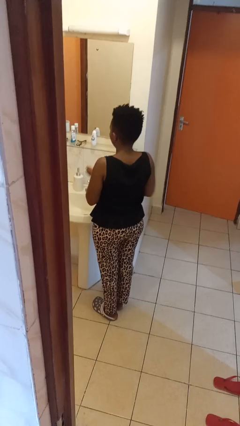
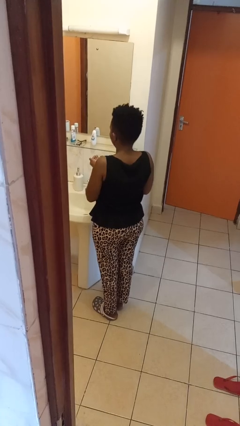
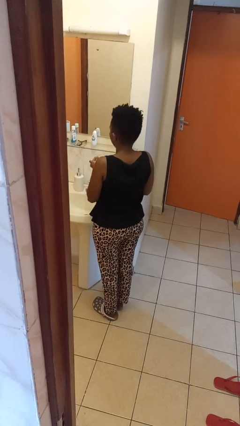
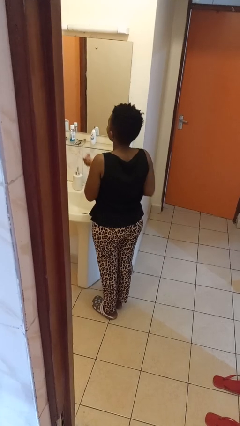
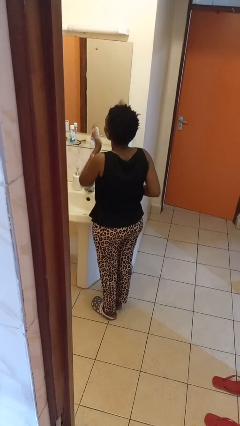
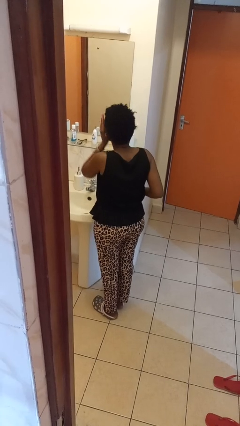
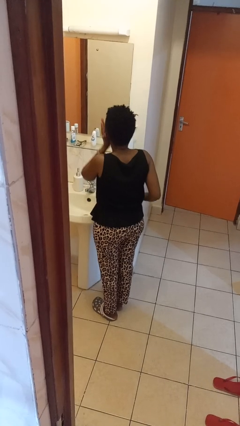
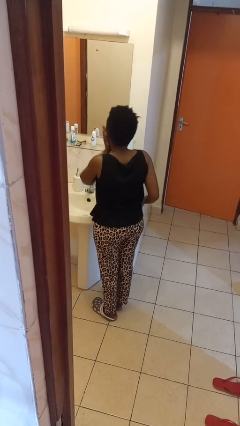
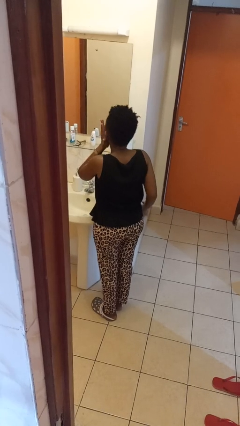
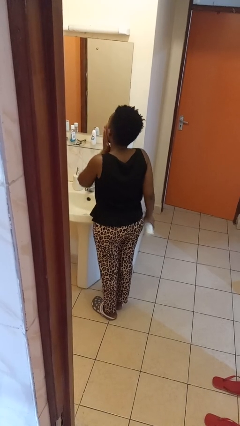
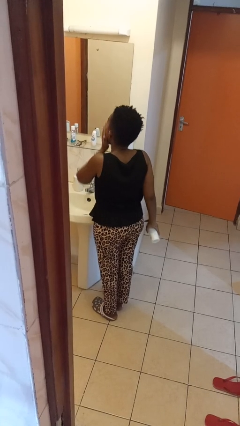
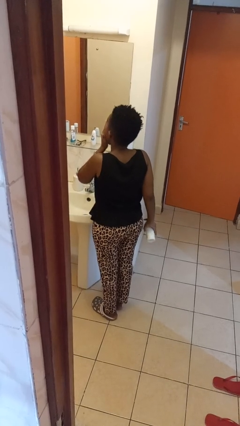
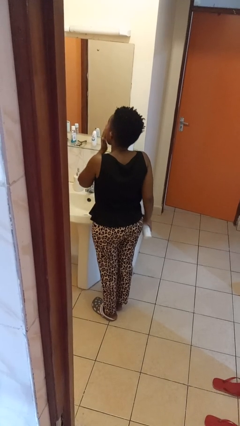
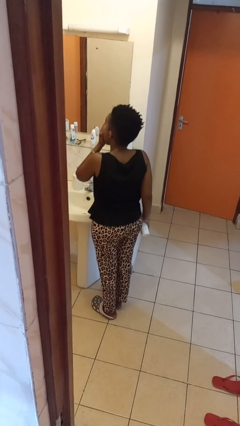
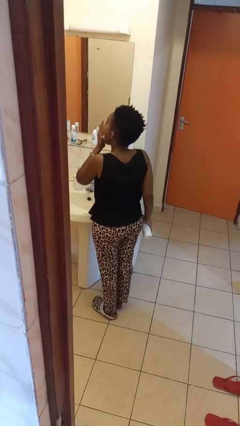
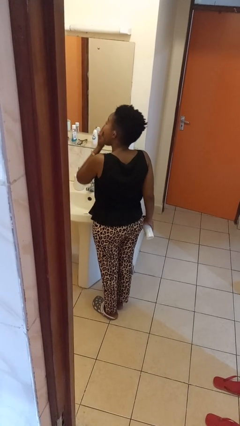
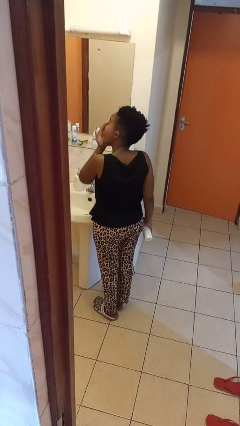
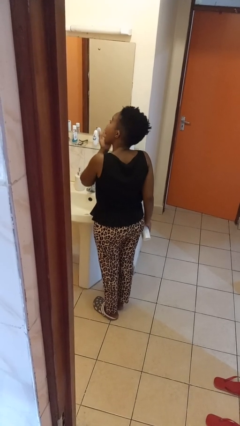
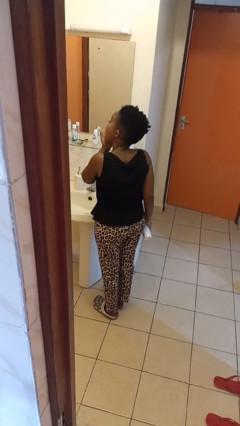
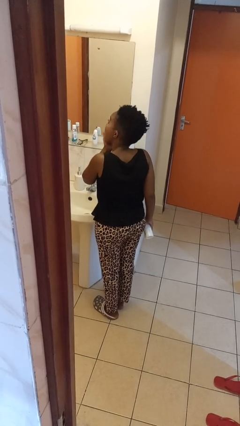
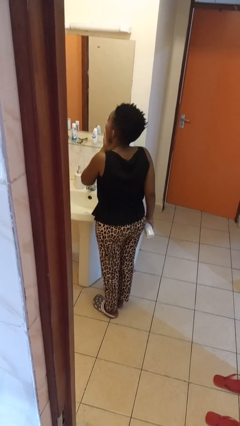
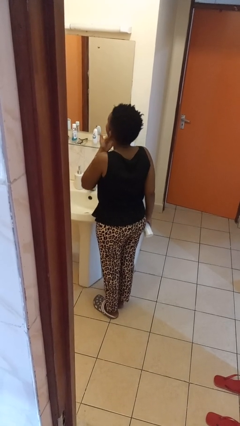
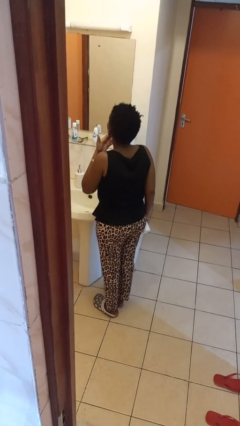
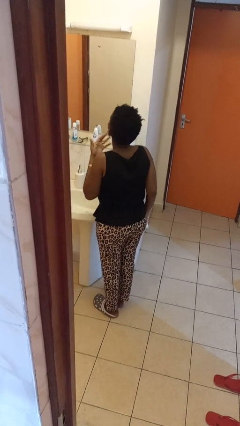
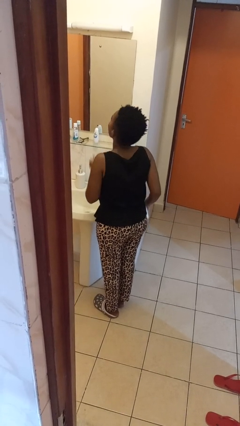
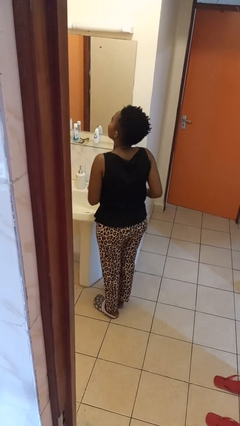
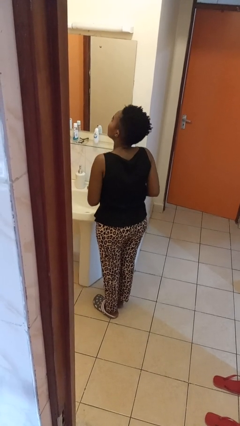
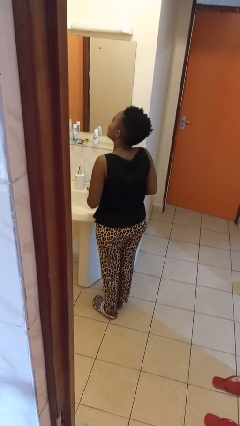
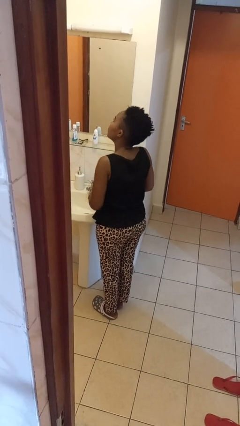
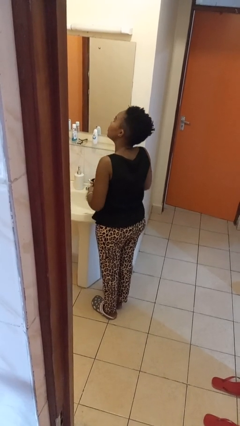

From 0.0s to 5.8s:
person applies facial moisturizer

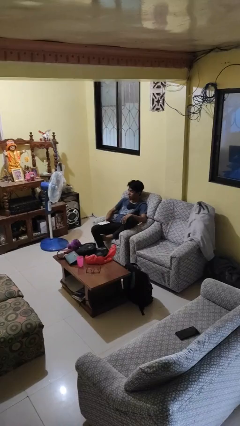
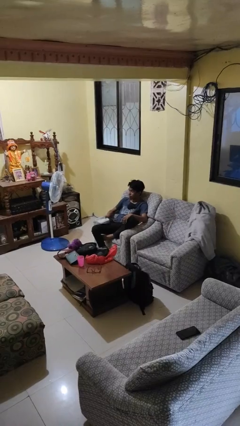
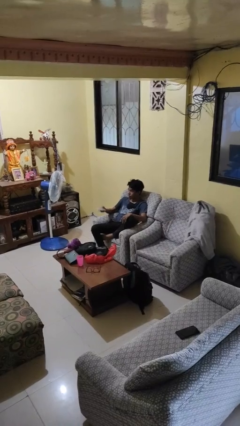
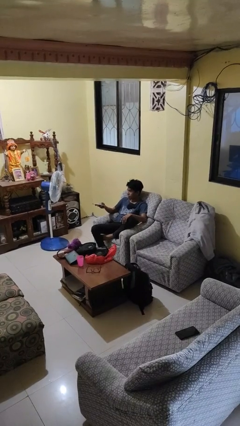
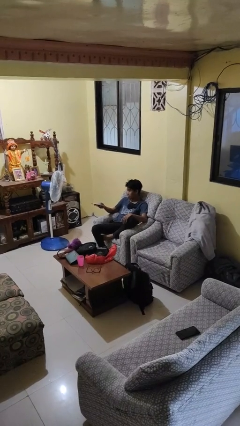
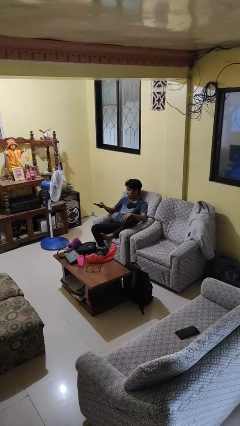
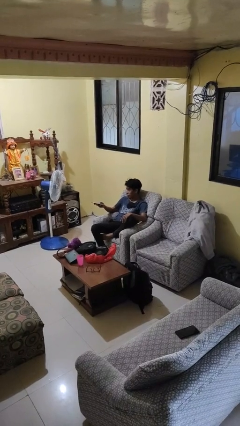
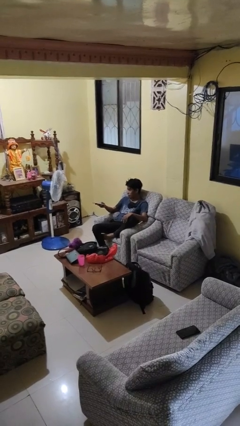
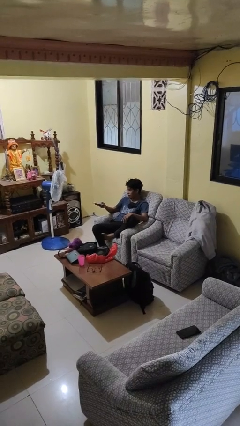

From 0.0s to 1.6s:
person uses television remote

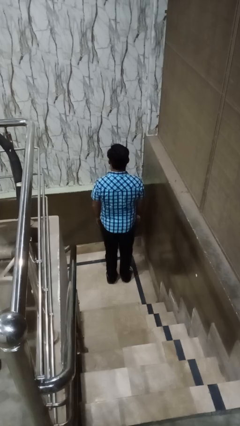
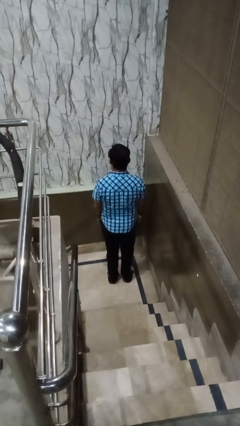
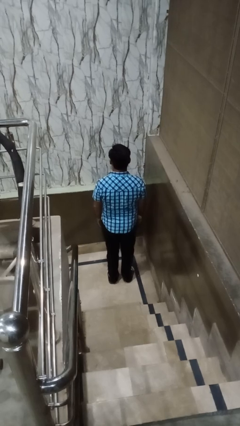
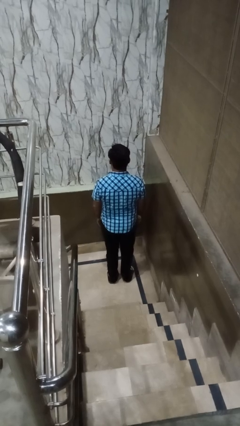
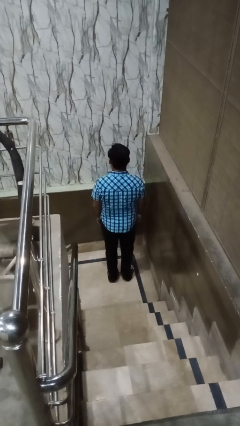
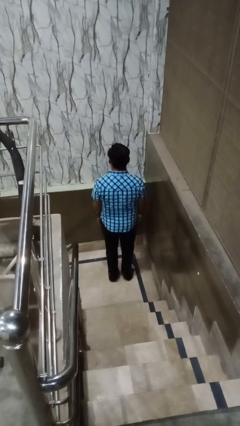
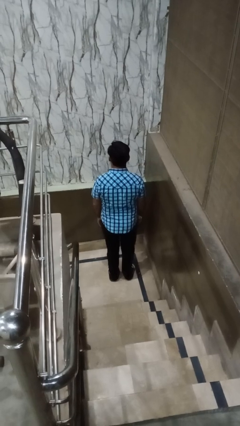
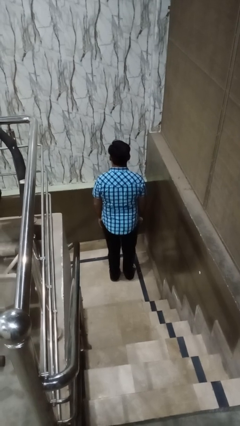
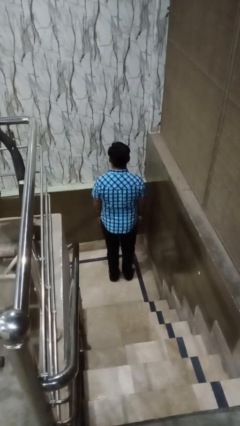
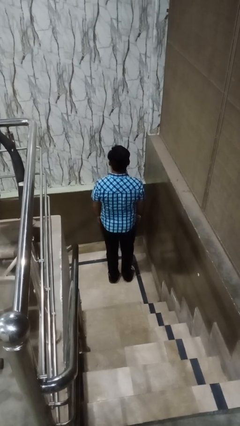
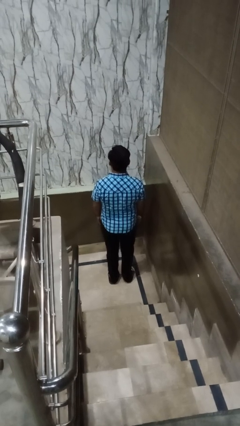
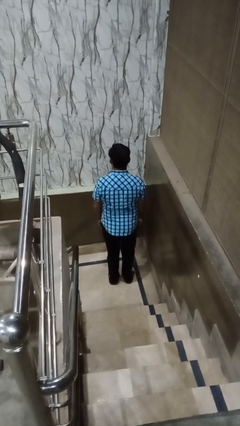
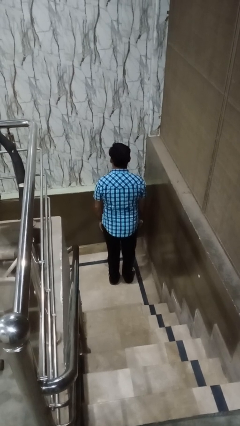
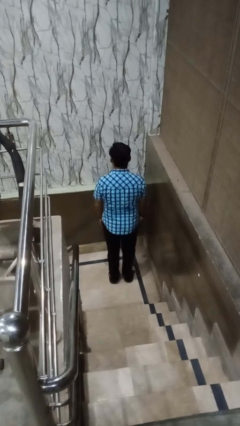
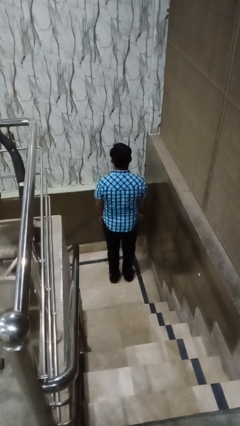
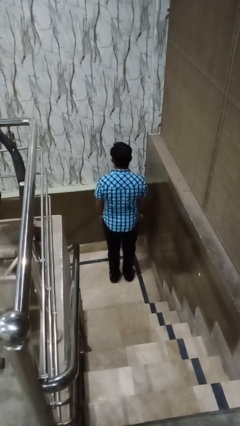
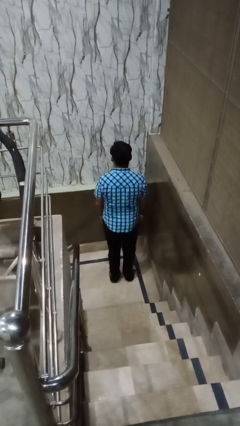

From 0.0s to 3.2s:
person wiggles hips

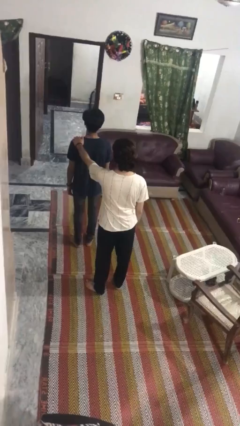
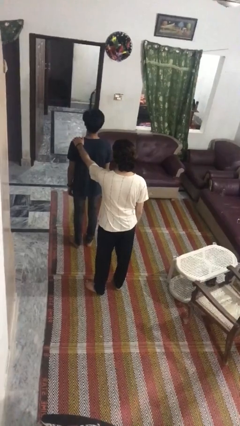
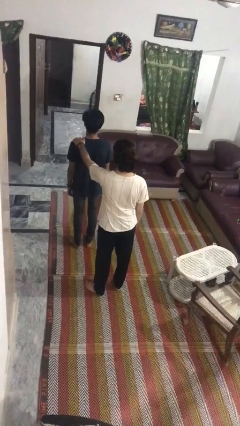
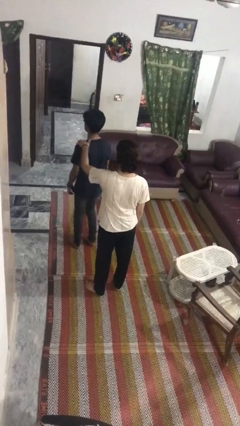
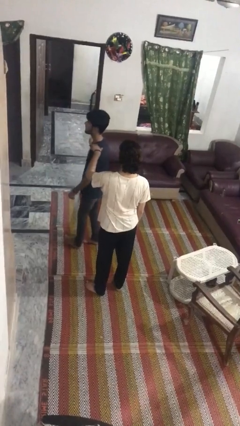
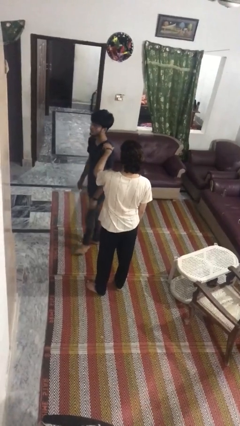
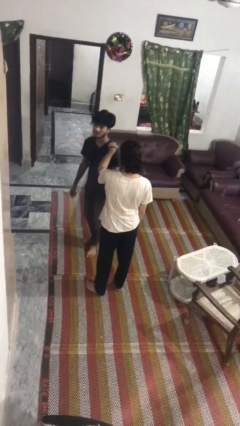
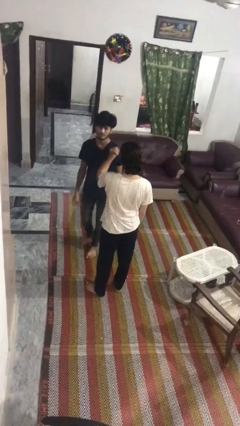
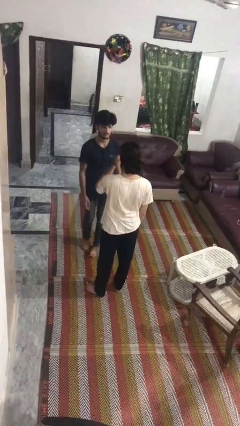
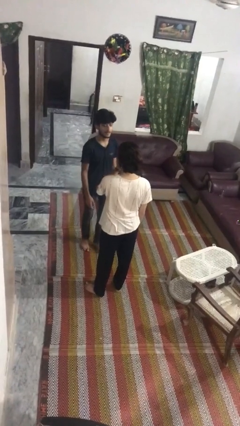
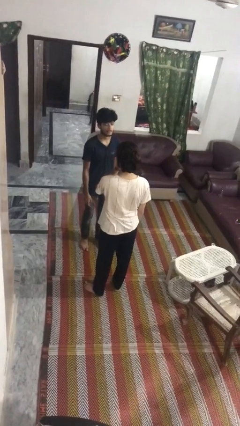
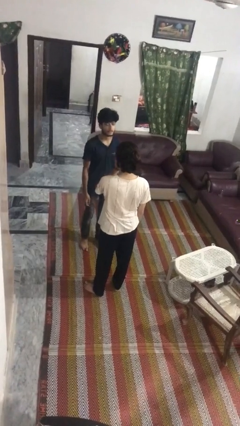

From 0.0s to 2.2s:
person spins person around

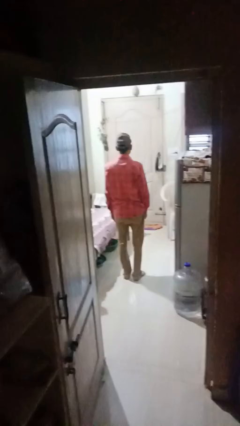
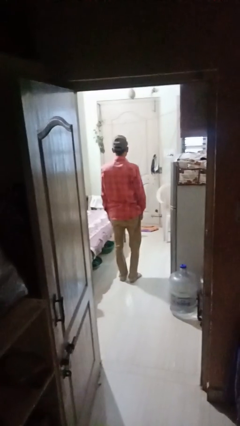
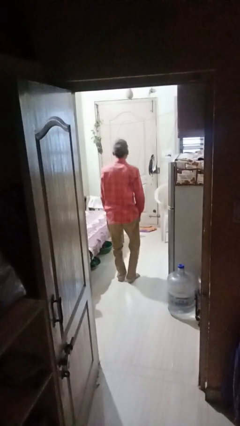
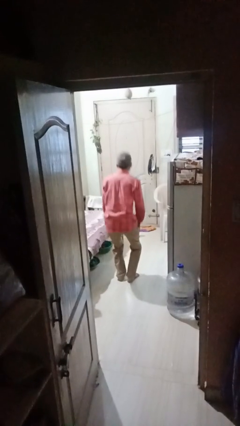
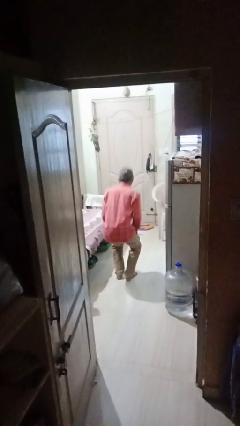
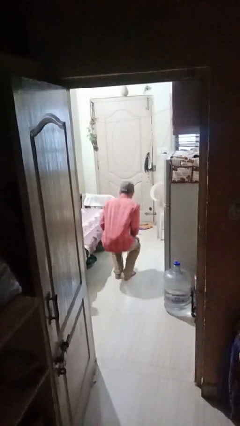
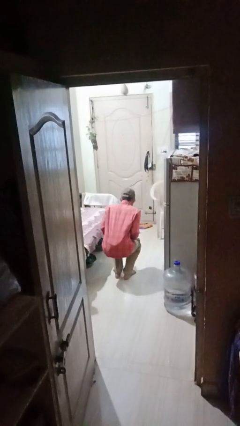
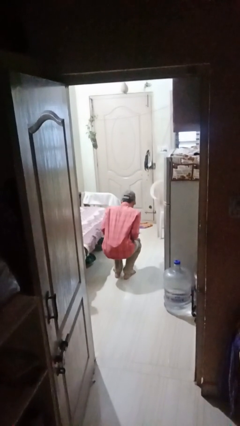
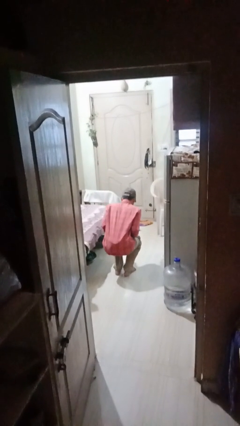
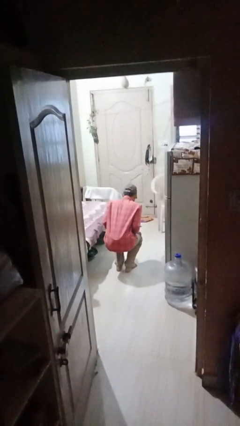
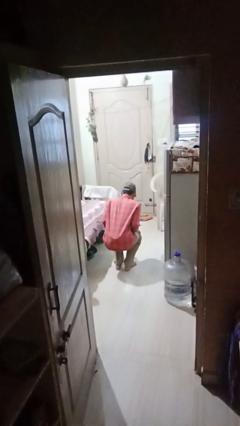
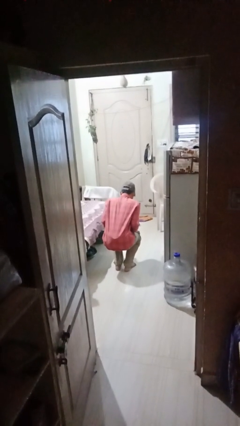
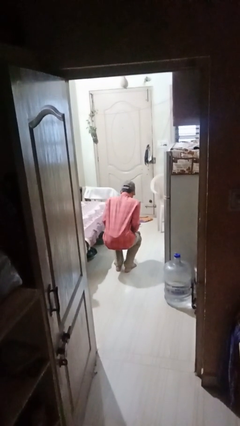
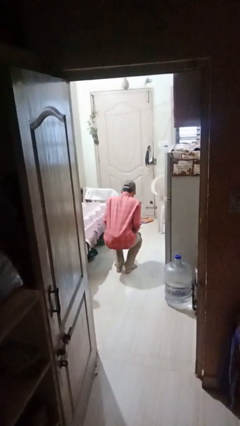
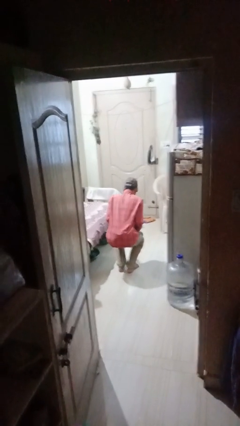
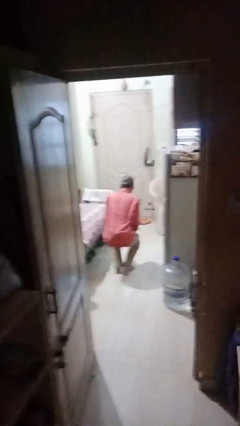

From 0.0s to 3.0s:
person squats

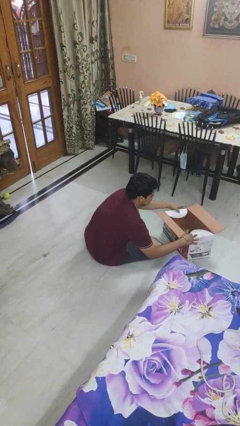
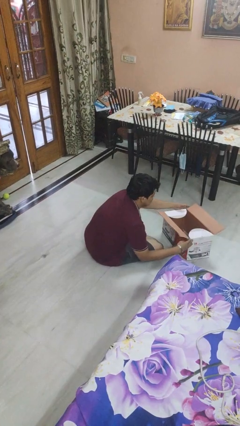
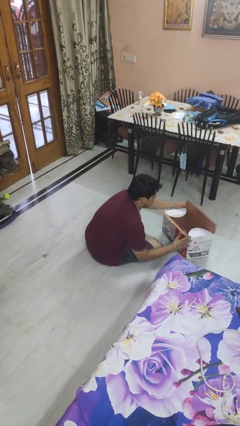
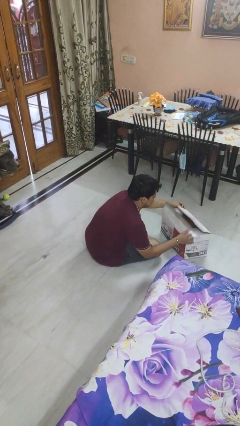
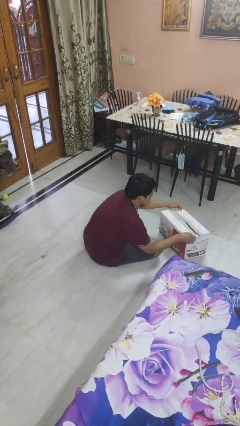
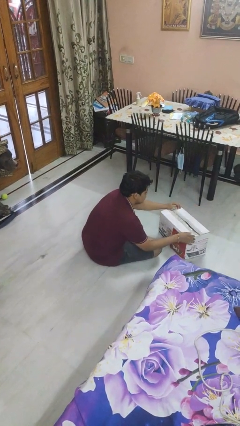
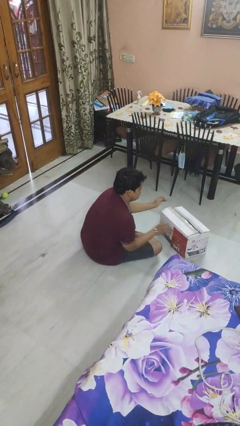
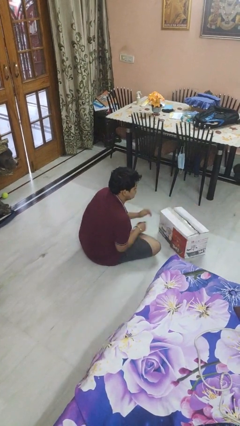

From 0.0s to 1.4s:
person closes box
